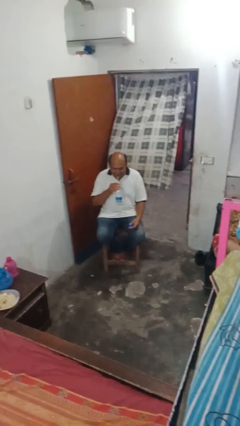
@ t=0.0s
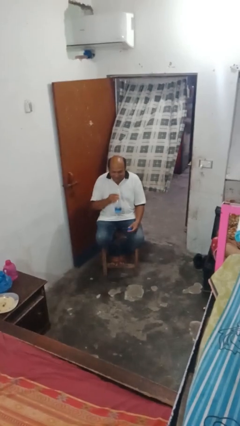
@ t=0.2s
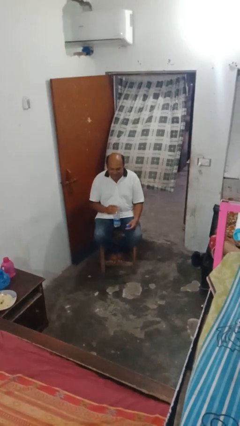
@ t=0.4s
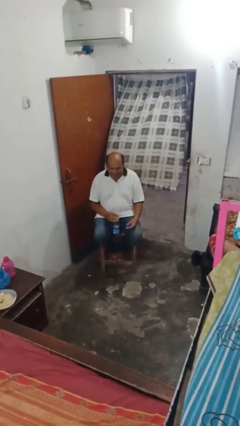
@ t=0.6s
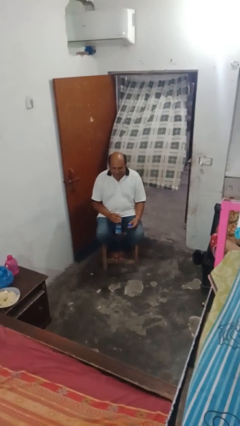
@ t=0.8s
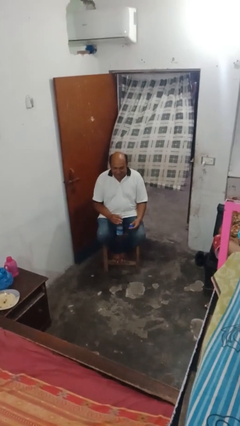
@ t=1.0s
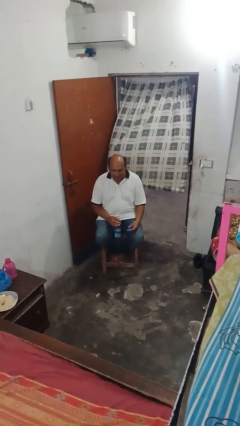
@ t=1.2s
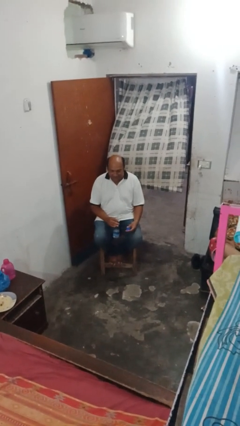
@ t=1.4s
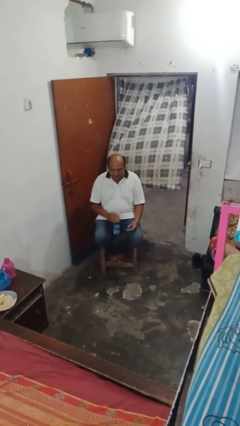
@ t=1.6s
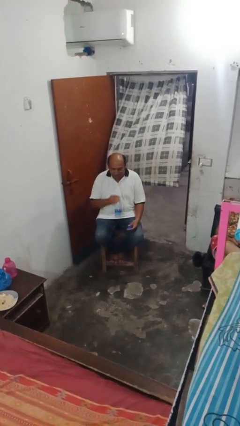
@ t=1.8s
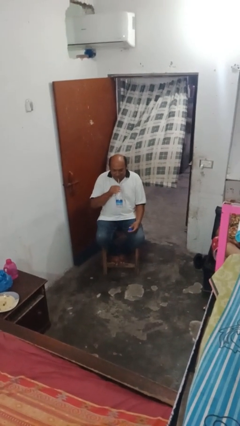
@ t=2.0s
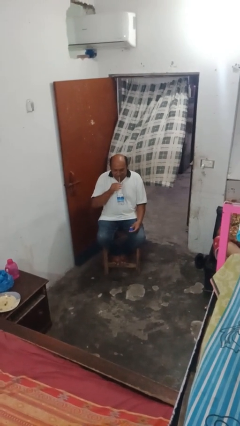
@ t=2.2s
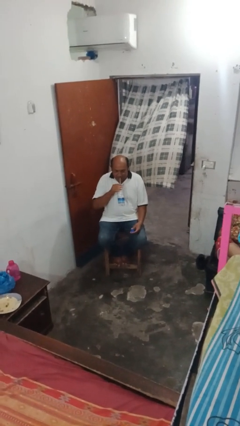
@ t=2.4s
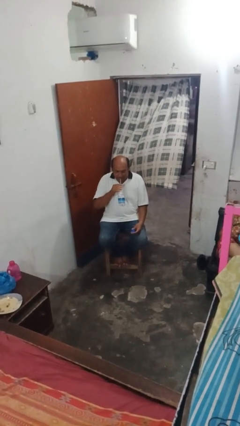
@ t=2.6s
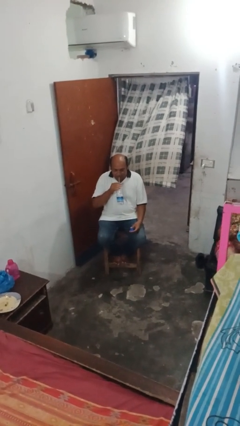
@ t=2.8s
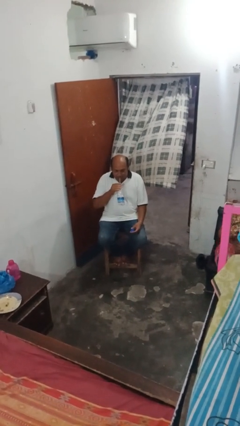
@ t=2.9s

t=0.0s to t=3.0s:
person drinks from straw

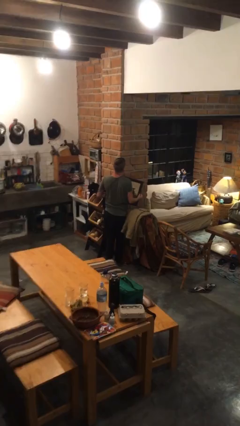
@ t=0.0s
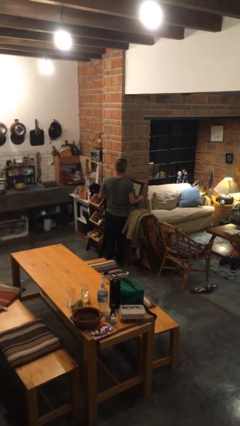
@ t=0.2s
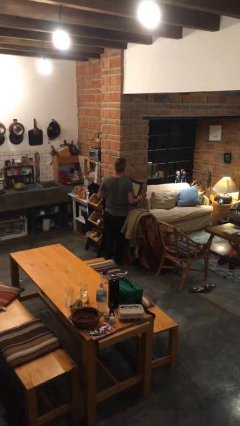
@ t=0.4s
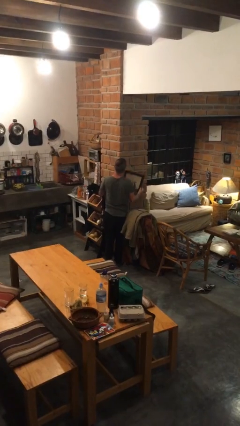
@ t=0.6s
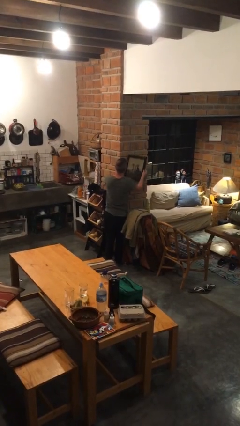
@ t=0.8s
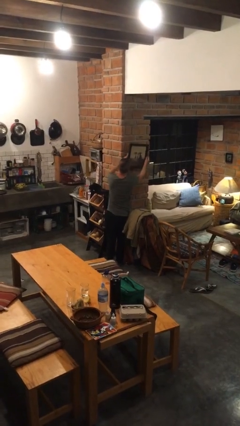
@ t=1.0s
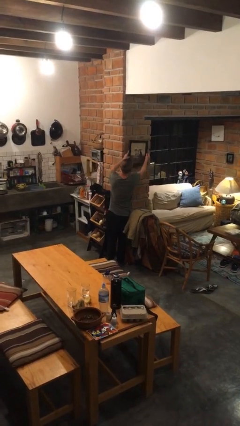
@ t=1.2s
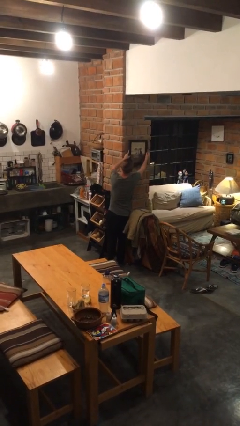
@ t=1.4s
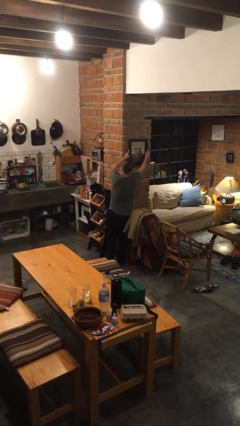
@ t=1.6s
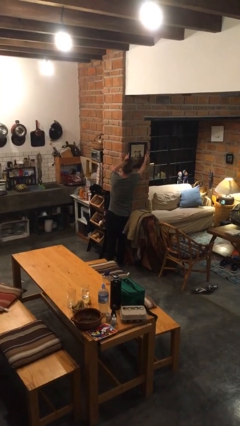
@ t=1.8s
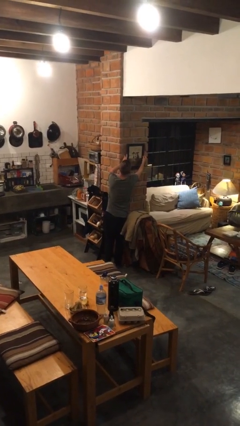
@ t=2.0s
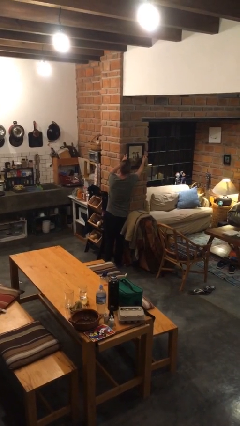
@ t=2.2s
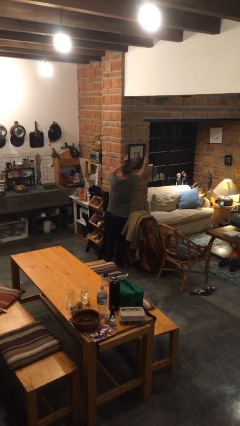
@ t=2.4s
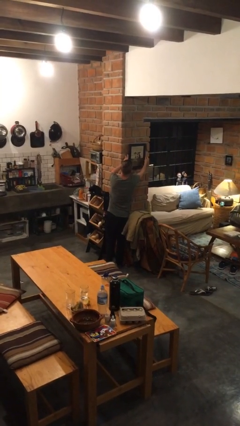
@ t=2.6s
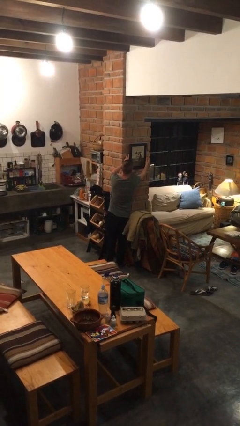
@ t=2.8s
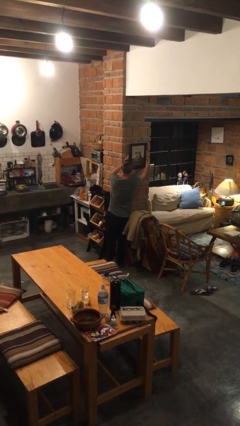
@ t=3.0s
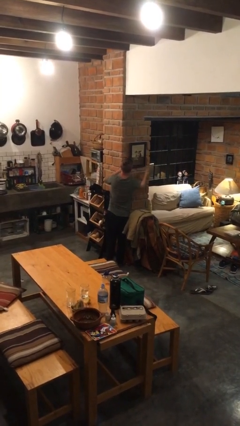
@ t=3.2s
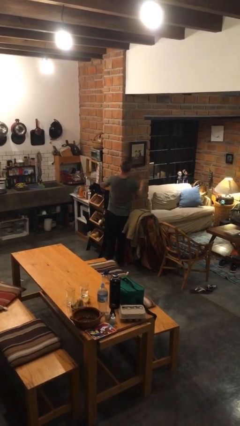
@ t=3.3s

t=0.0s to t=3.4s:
person puts up picture frame

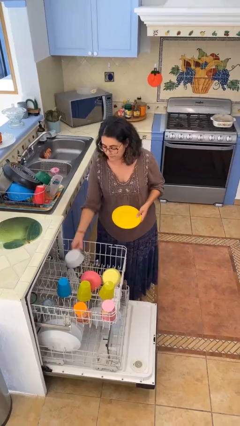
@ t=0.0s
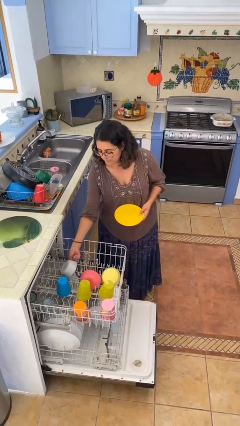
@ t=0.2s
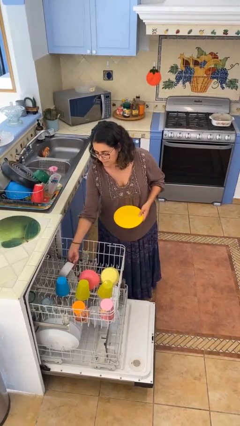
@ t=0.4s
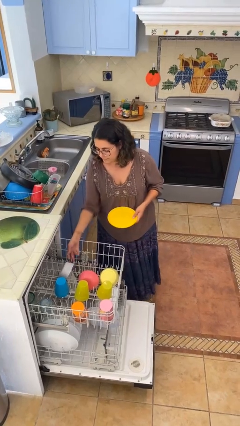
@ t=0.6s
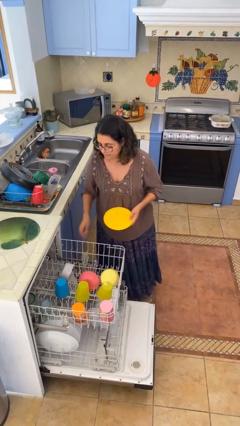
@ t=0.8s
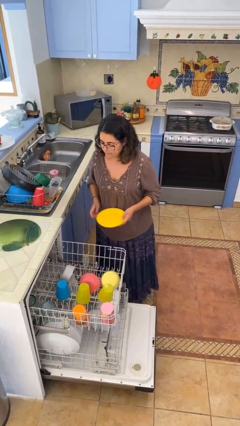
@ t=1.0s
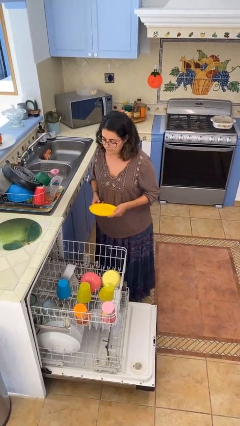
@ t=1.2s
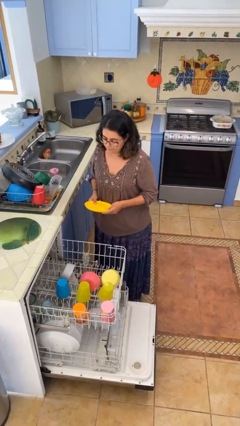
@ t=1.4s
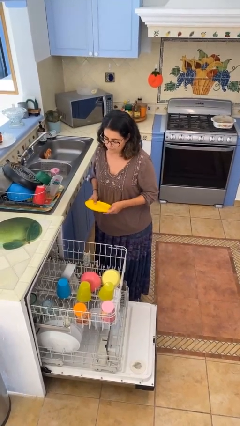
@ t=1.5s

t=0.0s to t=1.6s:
person loads dishwasher

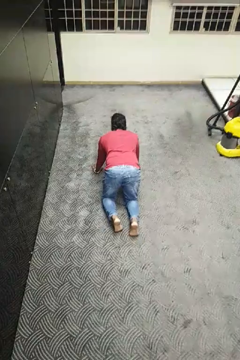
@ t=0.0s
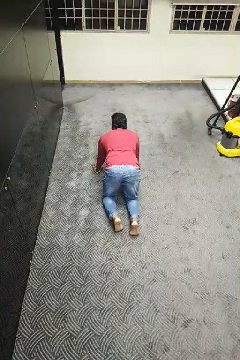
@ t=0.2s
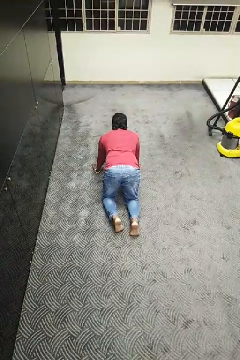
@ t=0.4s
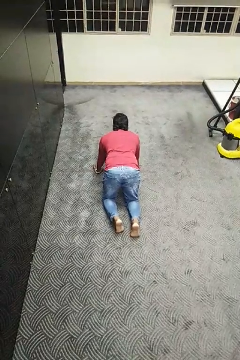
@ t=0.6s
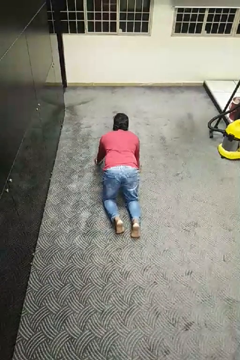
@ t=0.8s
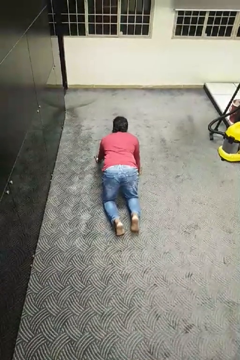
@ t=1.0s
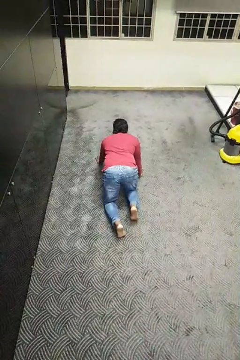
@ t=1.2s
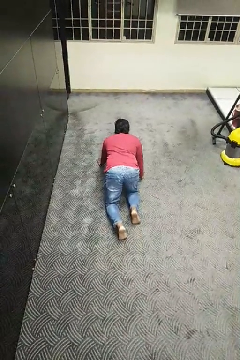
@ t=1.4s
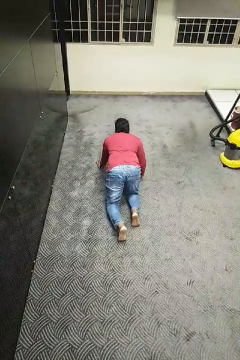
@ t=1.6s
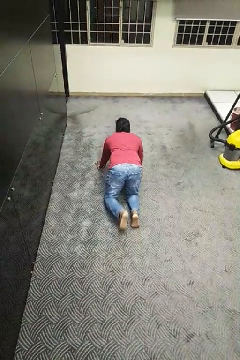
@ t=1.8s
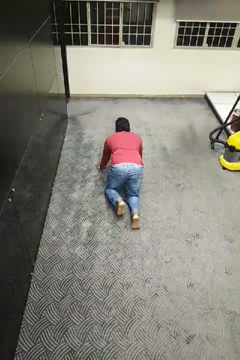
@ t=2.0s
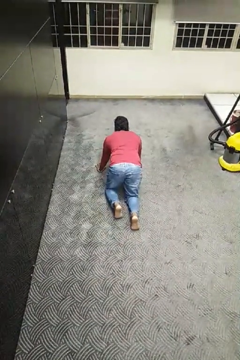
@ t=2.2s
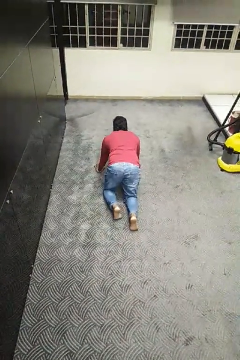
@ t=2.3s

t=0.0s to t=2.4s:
person crawls

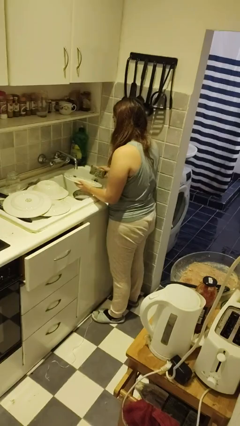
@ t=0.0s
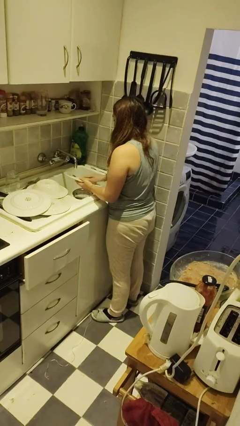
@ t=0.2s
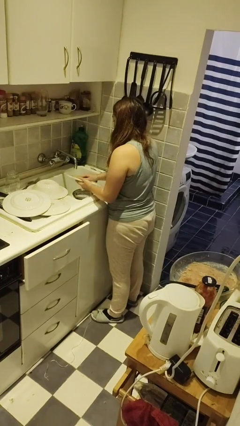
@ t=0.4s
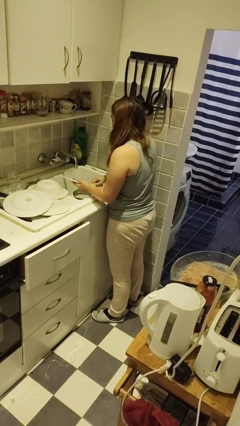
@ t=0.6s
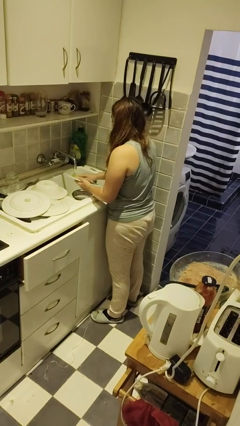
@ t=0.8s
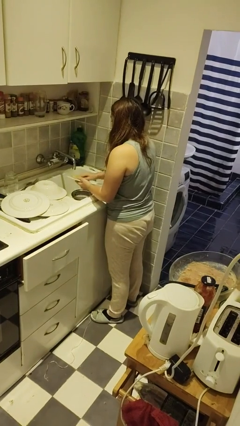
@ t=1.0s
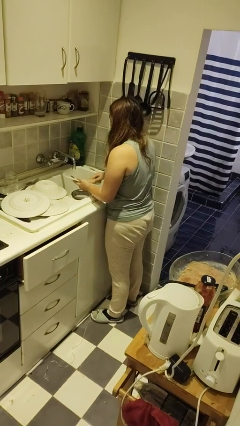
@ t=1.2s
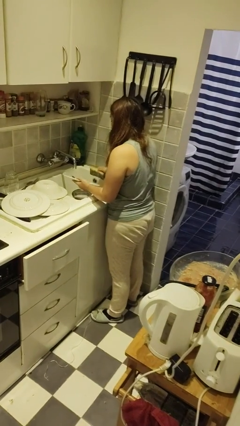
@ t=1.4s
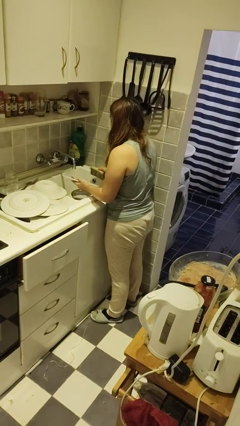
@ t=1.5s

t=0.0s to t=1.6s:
person washes dish

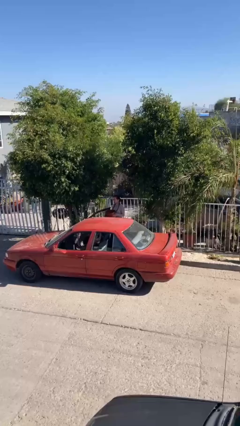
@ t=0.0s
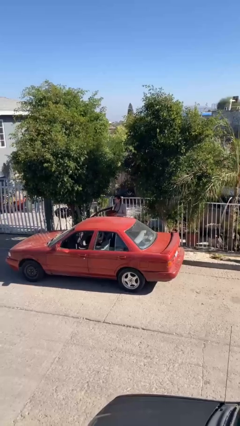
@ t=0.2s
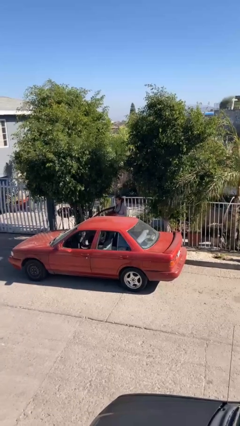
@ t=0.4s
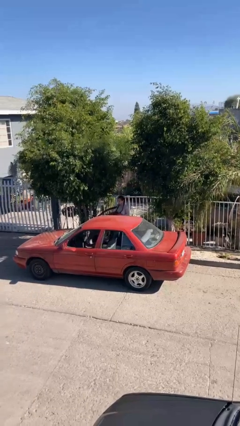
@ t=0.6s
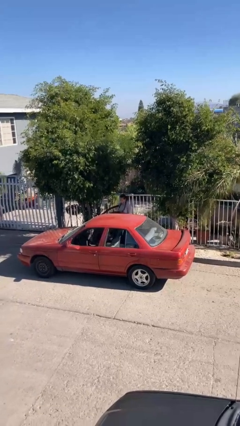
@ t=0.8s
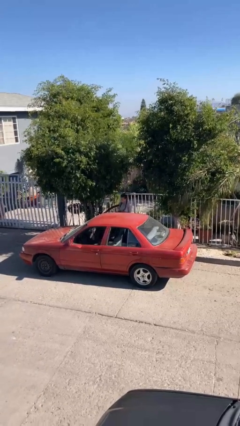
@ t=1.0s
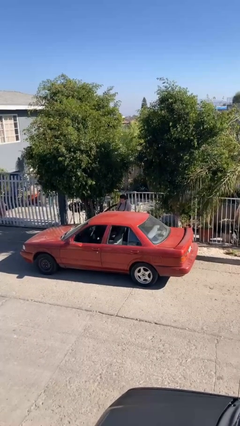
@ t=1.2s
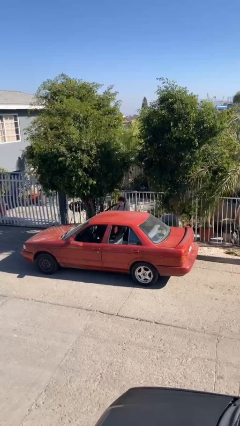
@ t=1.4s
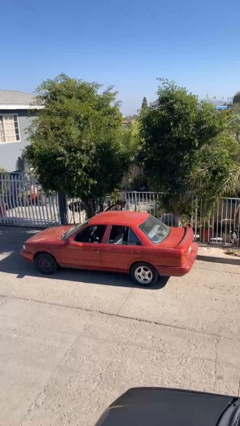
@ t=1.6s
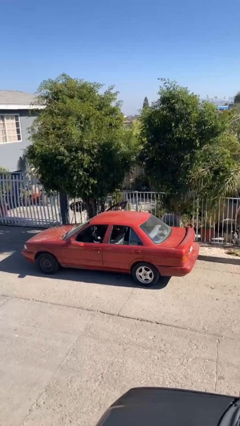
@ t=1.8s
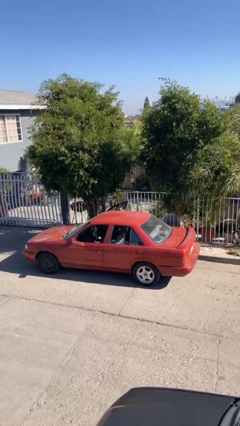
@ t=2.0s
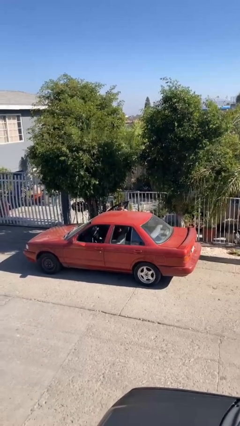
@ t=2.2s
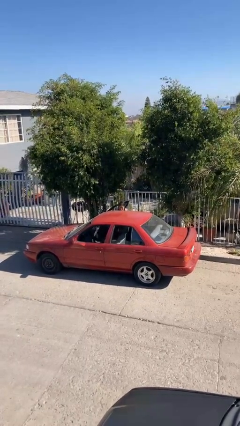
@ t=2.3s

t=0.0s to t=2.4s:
person loads car

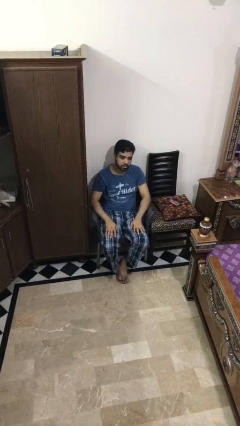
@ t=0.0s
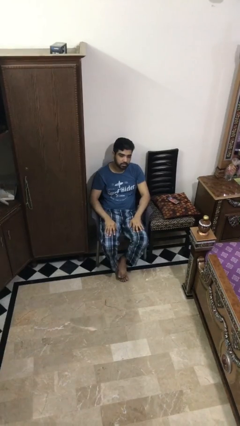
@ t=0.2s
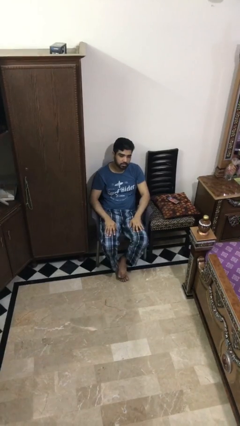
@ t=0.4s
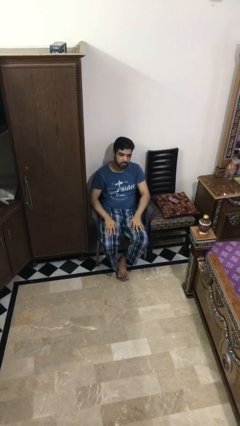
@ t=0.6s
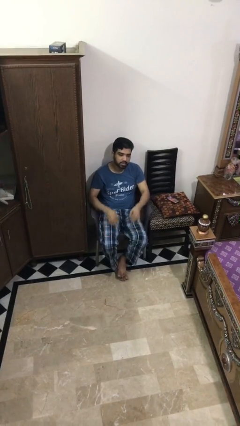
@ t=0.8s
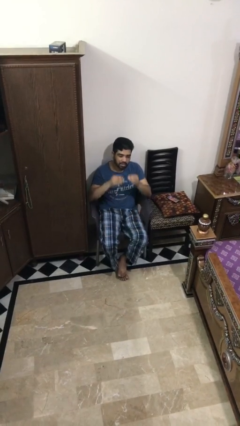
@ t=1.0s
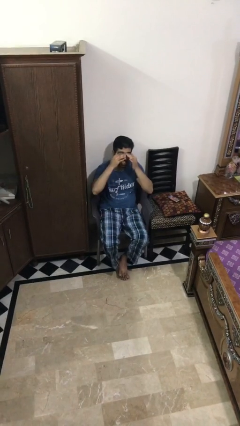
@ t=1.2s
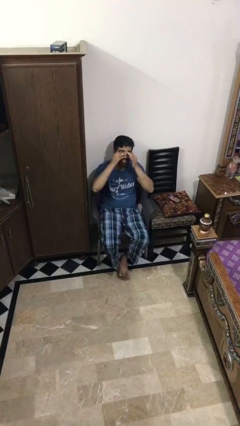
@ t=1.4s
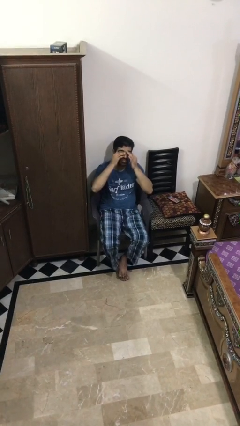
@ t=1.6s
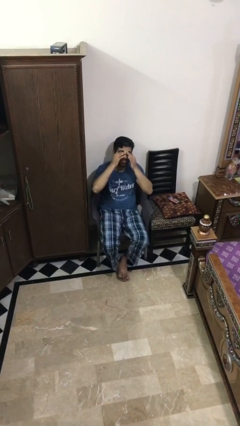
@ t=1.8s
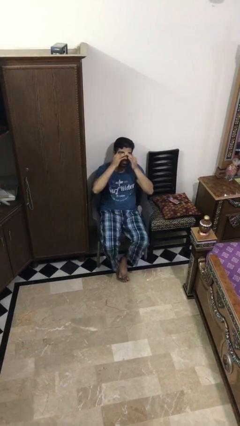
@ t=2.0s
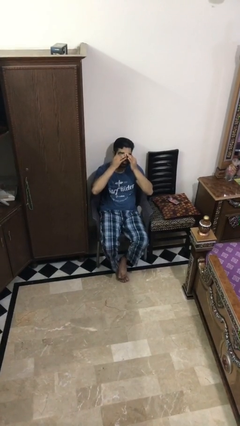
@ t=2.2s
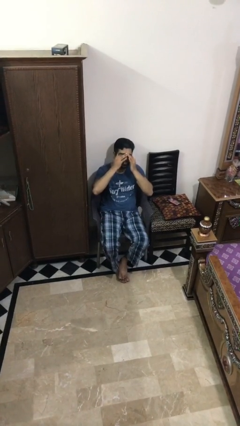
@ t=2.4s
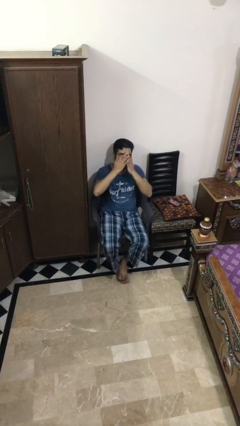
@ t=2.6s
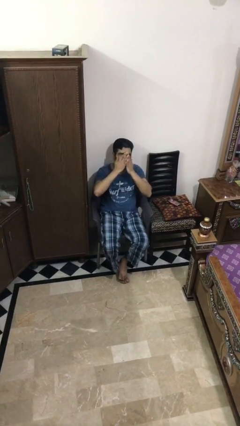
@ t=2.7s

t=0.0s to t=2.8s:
person rubs eyes

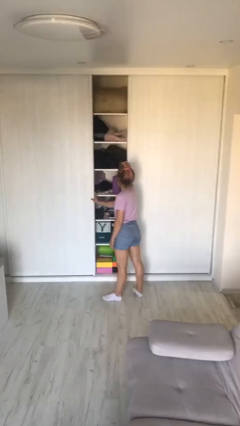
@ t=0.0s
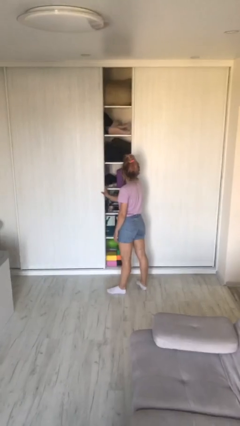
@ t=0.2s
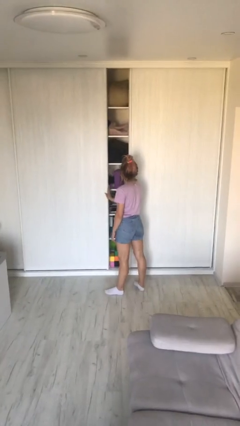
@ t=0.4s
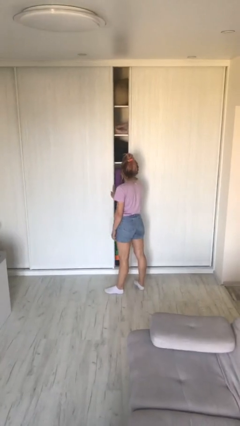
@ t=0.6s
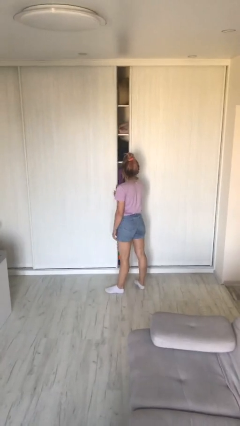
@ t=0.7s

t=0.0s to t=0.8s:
person closes sliding door
